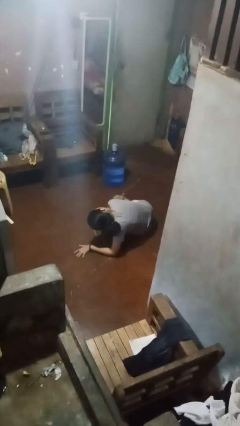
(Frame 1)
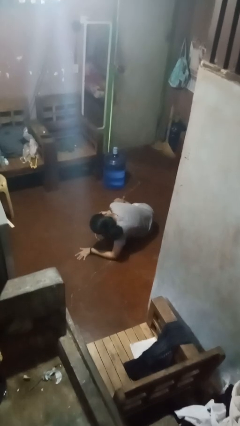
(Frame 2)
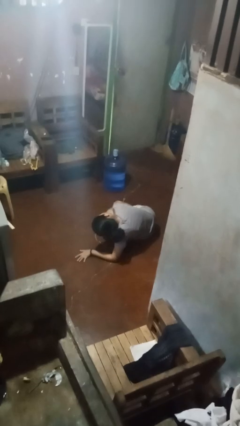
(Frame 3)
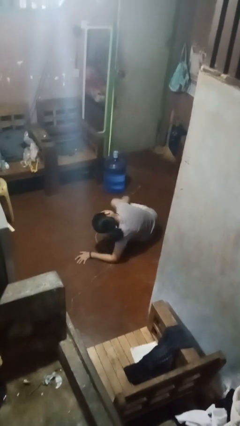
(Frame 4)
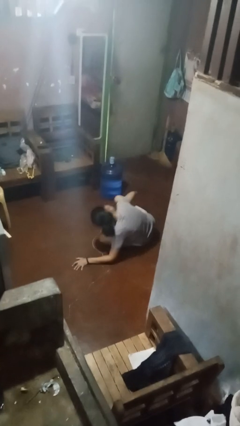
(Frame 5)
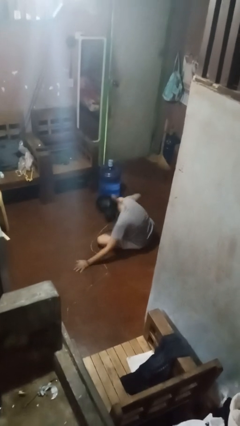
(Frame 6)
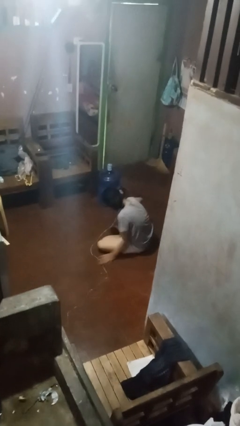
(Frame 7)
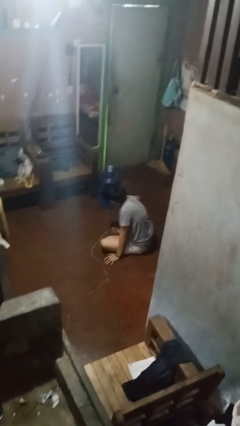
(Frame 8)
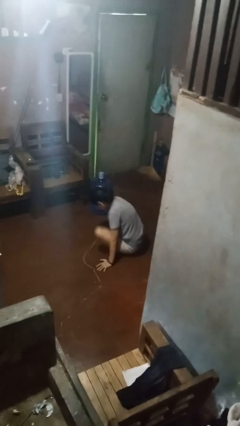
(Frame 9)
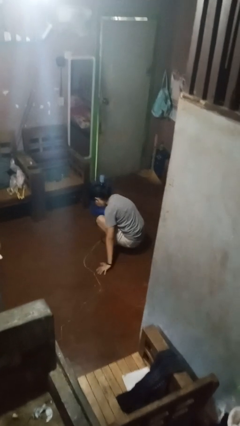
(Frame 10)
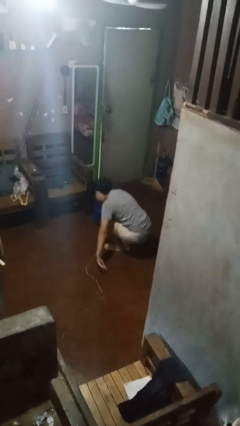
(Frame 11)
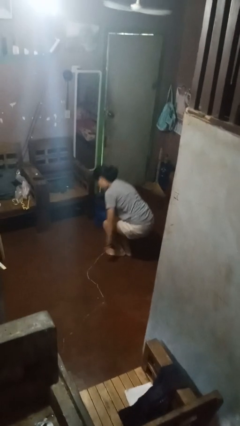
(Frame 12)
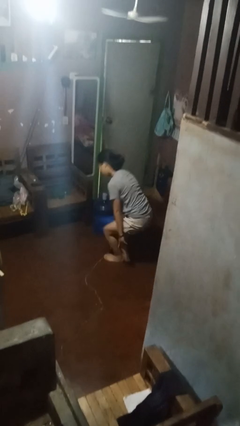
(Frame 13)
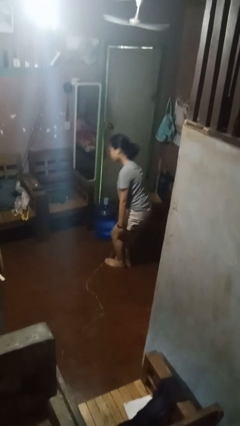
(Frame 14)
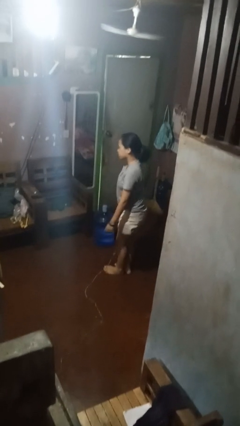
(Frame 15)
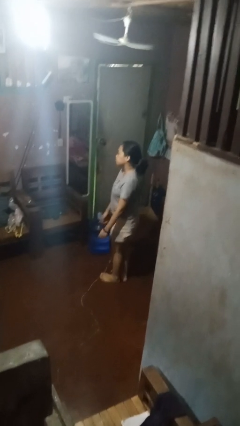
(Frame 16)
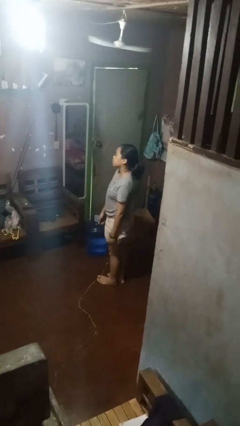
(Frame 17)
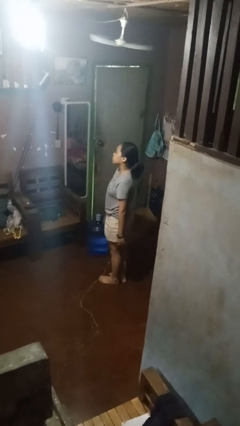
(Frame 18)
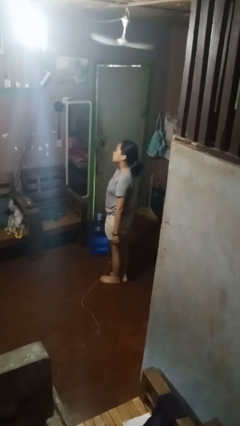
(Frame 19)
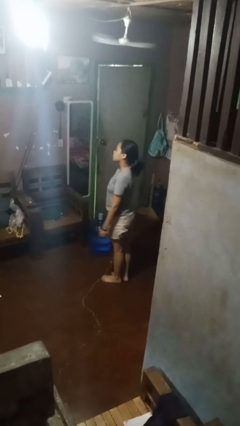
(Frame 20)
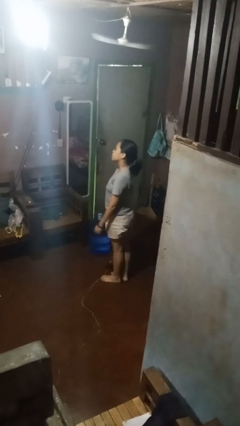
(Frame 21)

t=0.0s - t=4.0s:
person stands up from floor

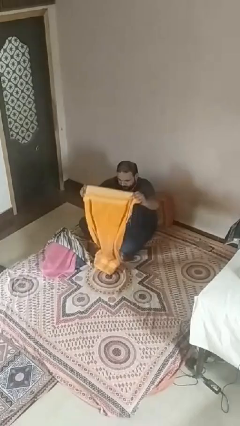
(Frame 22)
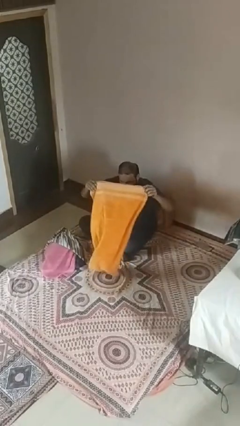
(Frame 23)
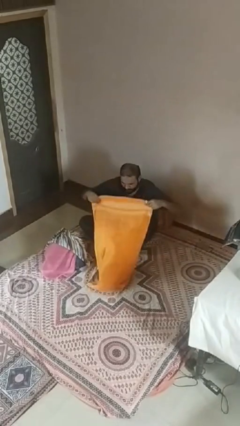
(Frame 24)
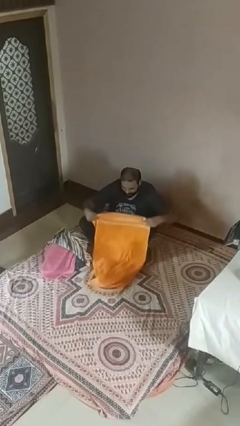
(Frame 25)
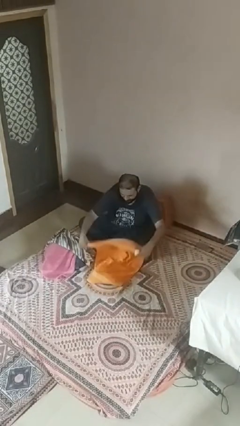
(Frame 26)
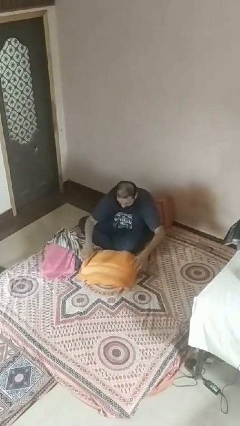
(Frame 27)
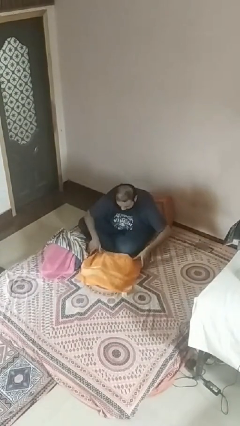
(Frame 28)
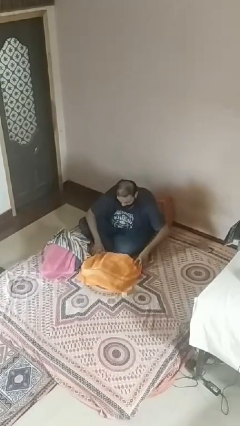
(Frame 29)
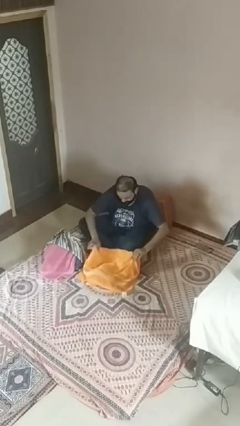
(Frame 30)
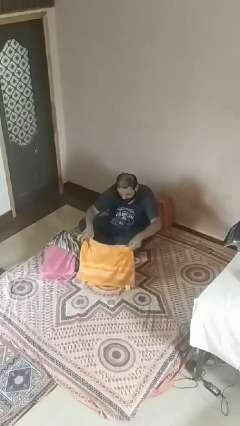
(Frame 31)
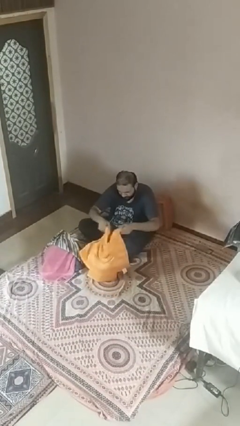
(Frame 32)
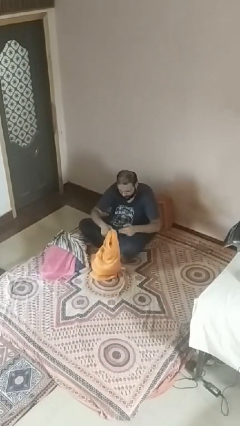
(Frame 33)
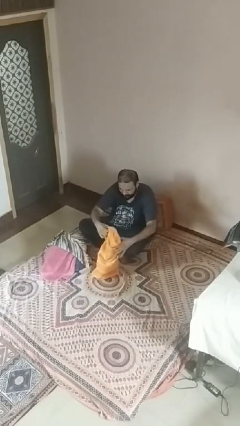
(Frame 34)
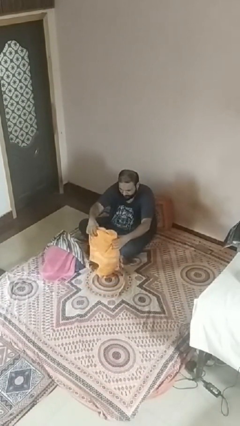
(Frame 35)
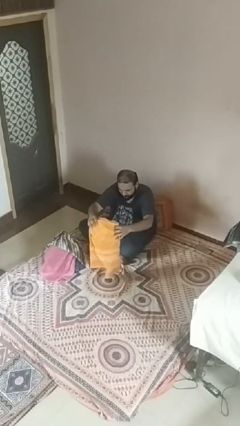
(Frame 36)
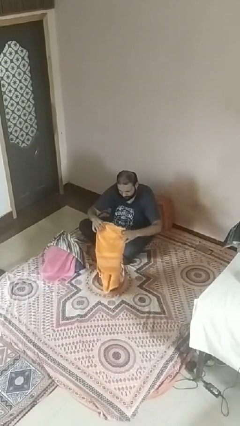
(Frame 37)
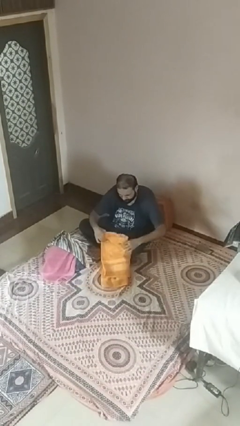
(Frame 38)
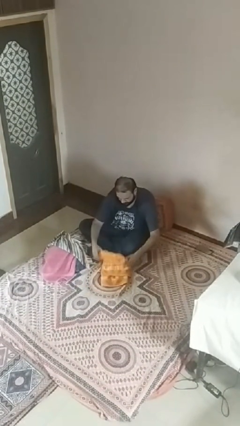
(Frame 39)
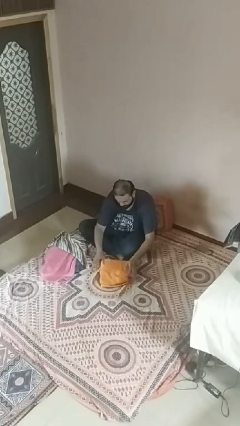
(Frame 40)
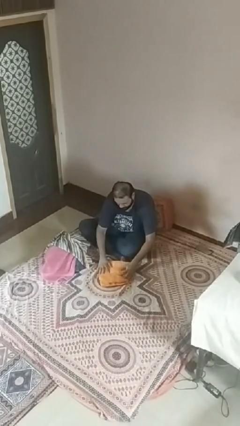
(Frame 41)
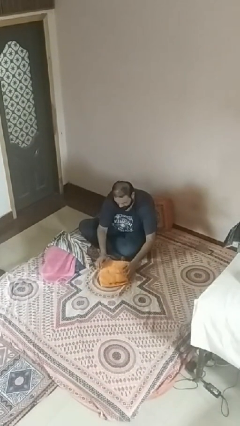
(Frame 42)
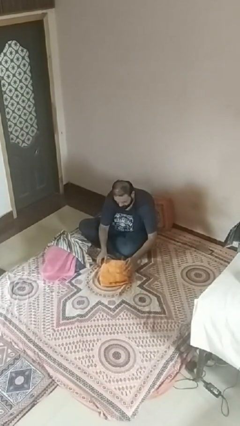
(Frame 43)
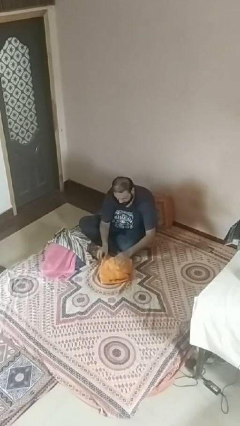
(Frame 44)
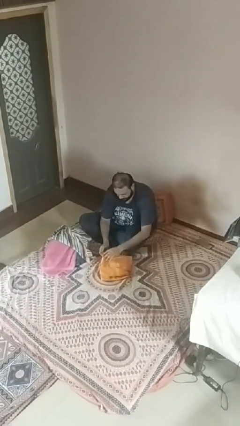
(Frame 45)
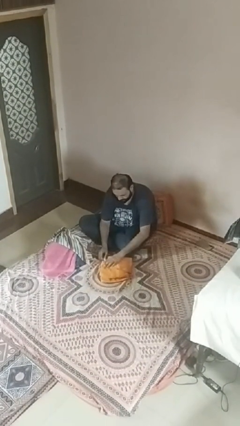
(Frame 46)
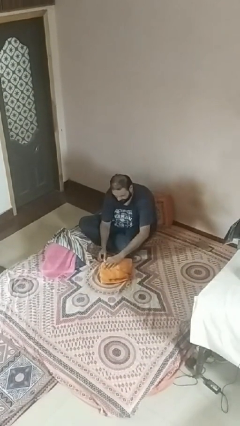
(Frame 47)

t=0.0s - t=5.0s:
person folds towel

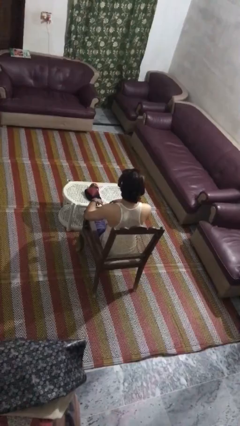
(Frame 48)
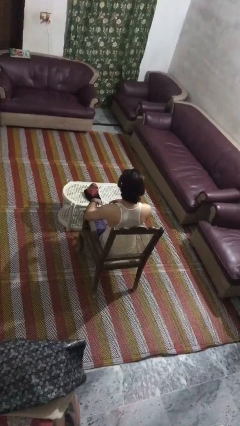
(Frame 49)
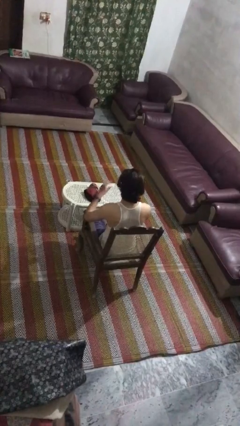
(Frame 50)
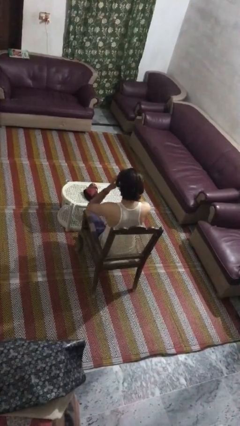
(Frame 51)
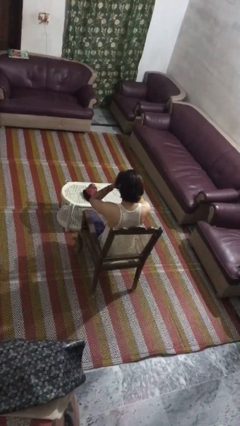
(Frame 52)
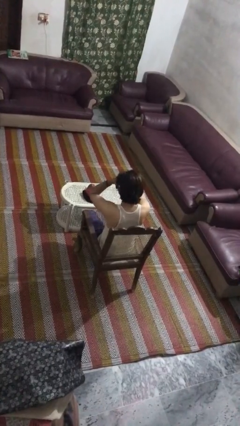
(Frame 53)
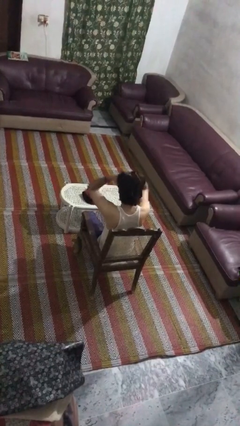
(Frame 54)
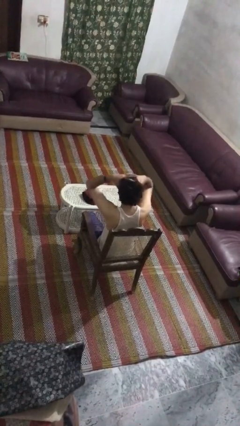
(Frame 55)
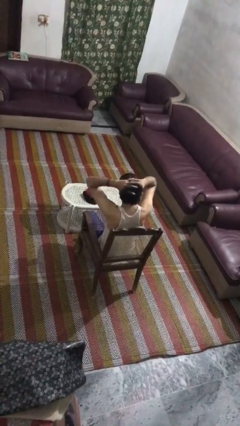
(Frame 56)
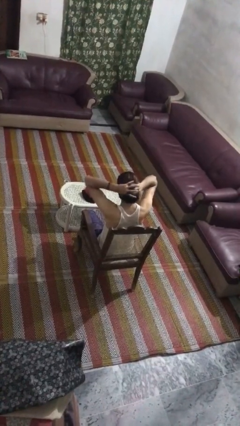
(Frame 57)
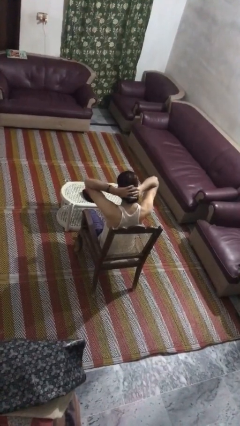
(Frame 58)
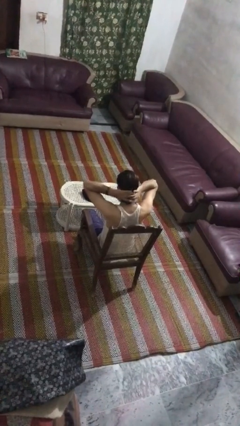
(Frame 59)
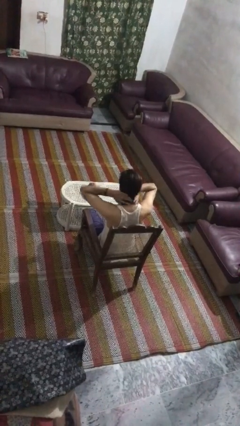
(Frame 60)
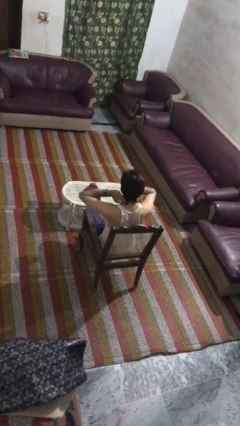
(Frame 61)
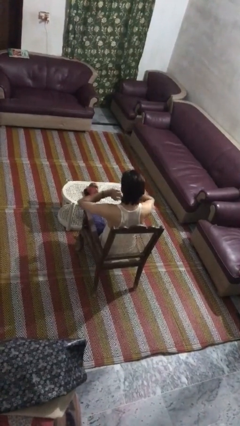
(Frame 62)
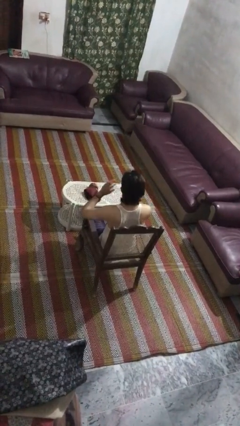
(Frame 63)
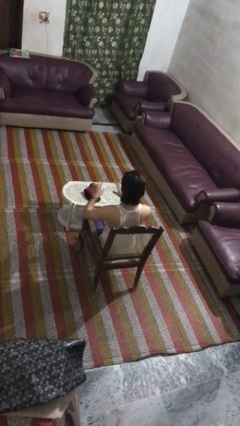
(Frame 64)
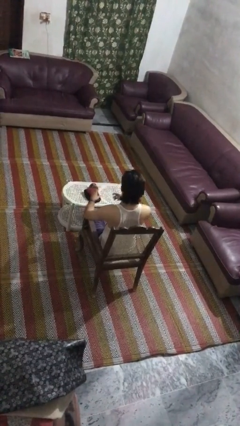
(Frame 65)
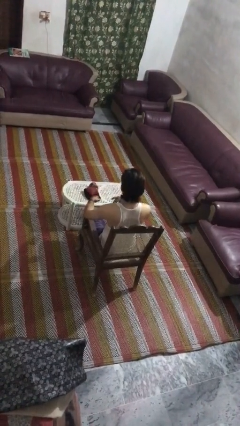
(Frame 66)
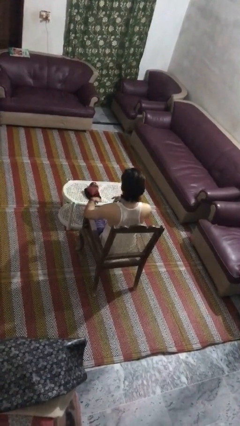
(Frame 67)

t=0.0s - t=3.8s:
person strokes hair

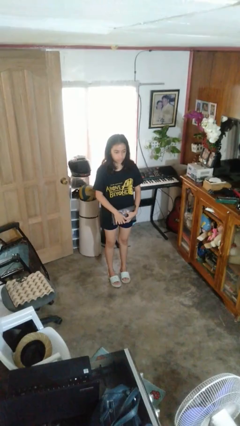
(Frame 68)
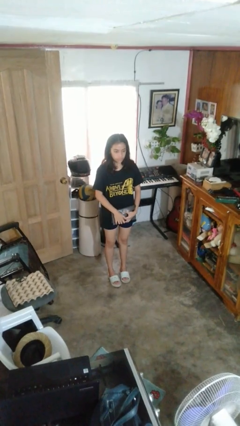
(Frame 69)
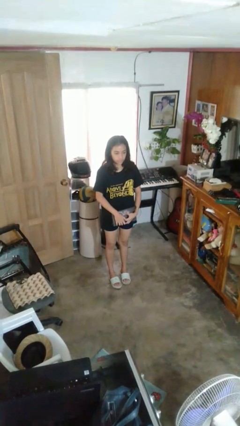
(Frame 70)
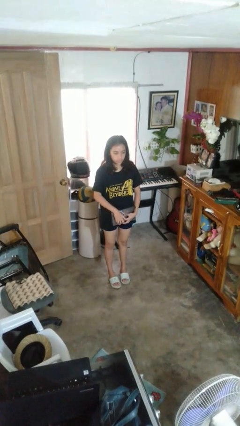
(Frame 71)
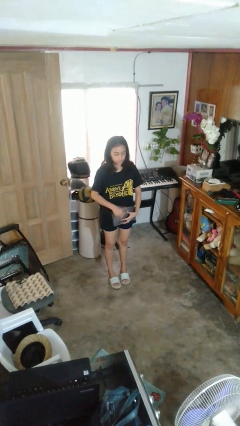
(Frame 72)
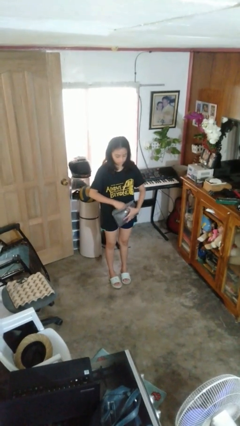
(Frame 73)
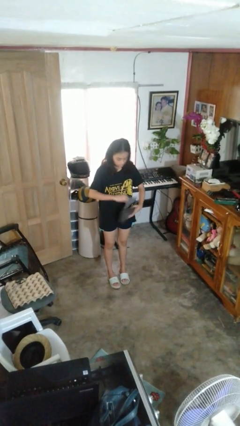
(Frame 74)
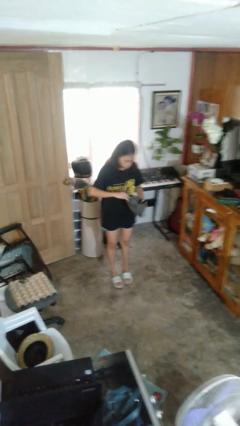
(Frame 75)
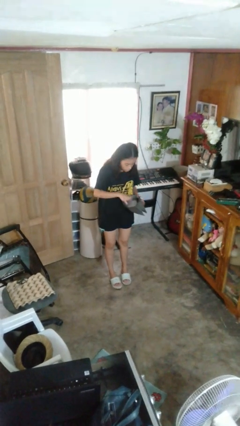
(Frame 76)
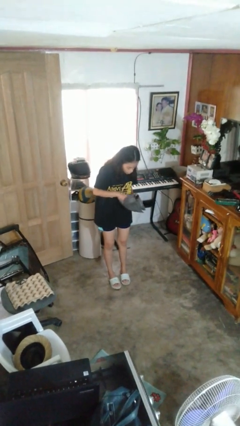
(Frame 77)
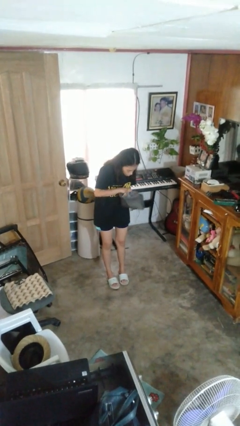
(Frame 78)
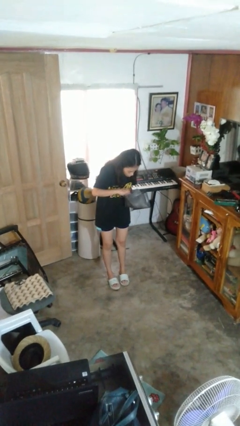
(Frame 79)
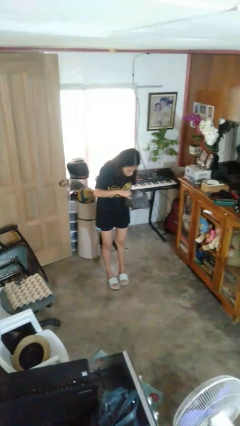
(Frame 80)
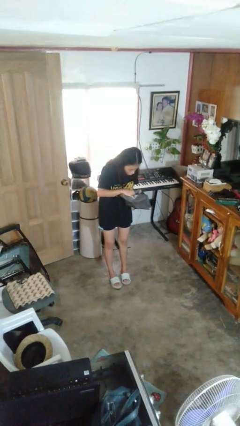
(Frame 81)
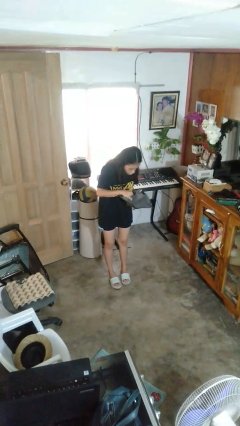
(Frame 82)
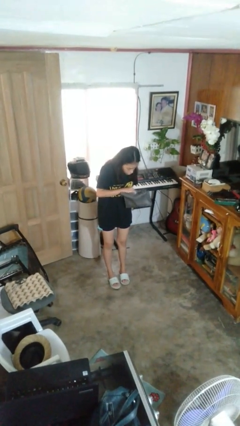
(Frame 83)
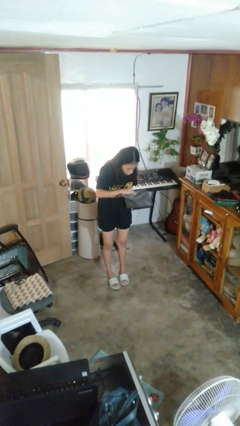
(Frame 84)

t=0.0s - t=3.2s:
person searches in purse

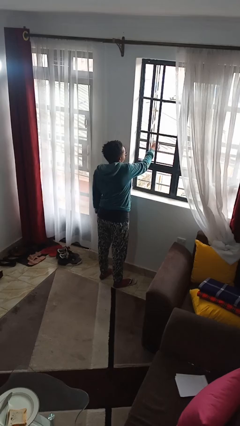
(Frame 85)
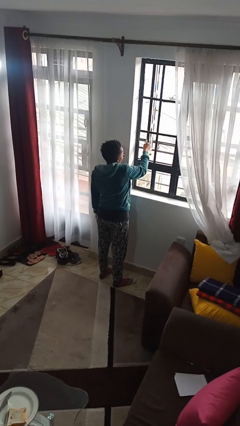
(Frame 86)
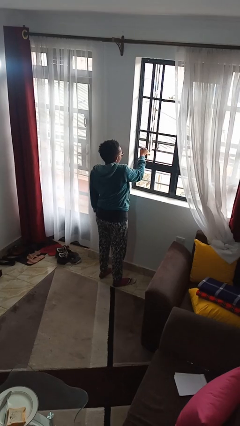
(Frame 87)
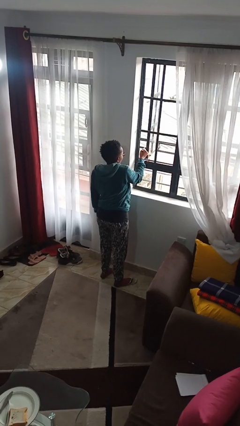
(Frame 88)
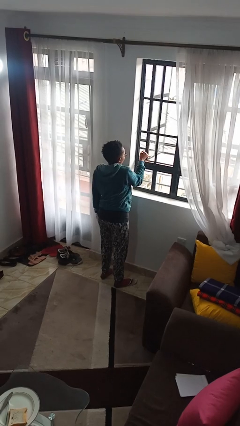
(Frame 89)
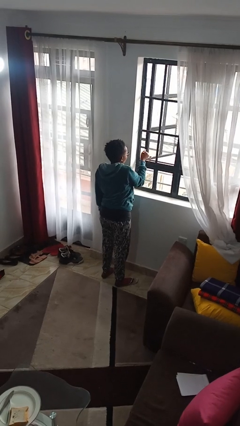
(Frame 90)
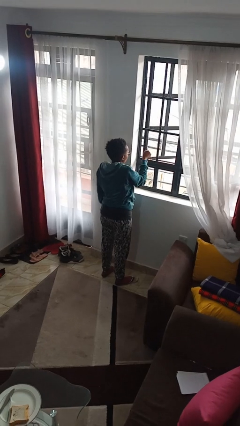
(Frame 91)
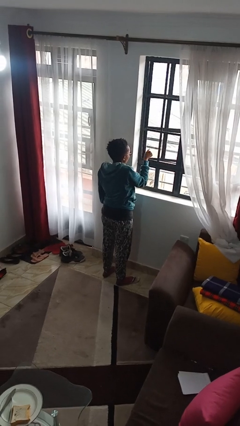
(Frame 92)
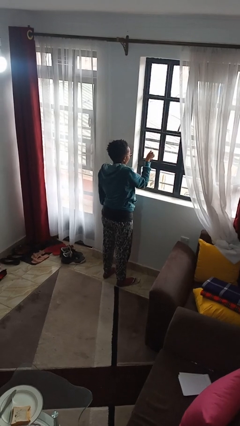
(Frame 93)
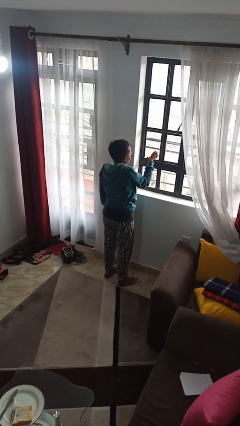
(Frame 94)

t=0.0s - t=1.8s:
person closes home window
